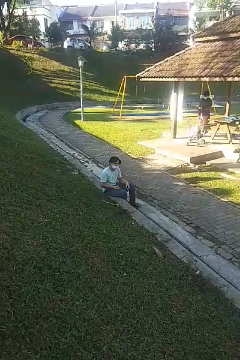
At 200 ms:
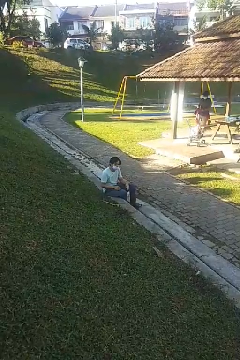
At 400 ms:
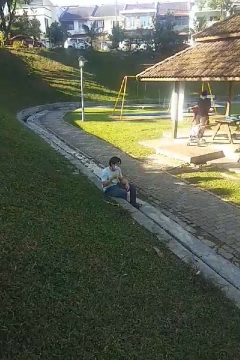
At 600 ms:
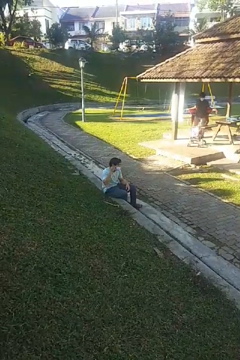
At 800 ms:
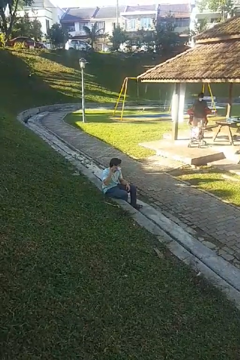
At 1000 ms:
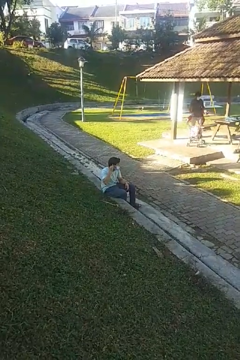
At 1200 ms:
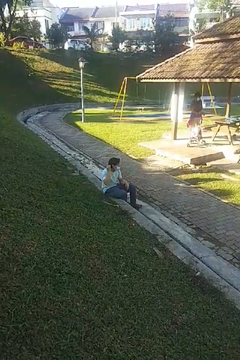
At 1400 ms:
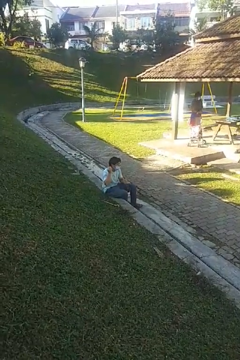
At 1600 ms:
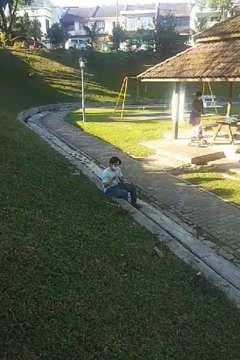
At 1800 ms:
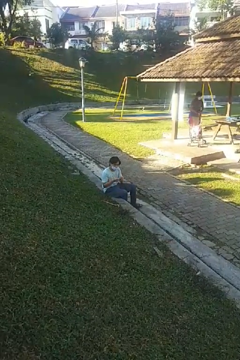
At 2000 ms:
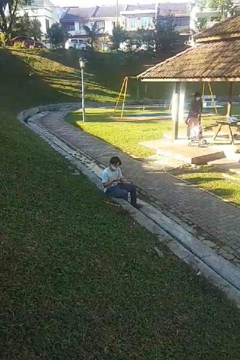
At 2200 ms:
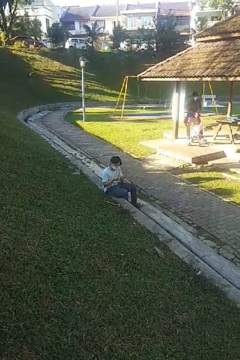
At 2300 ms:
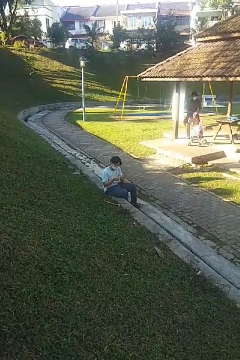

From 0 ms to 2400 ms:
person takes off earrings

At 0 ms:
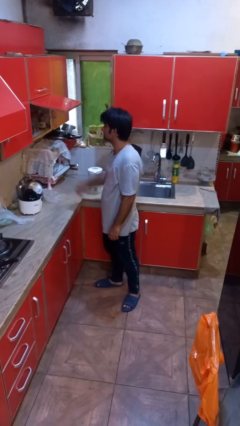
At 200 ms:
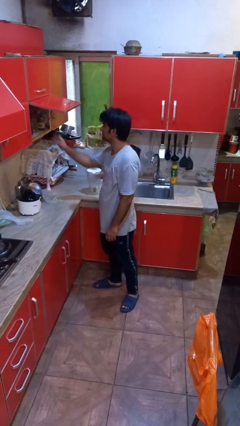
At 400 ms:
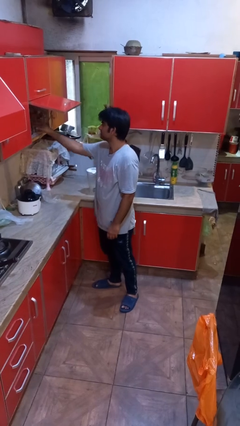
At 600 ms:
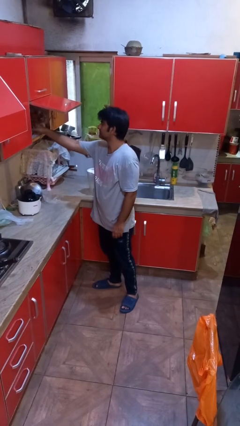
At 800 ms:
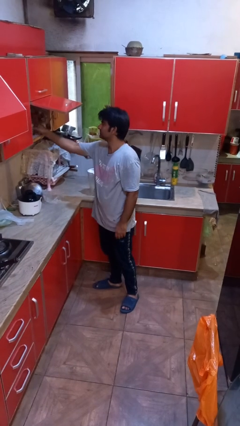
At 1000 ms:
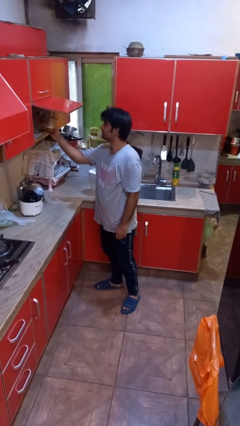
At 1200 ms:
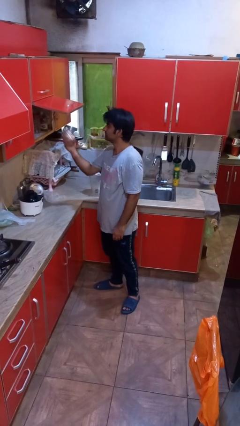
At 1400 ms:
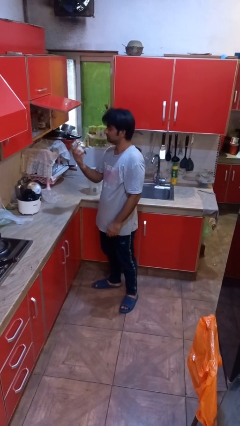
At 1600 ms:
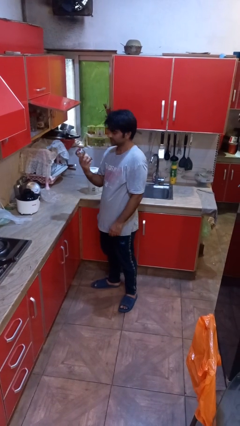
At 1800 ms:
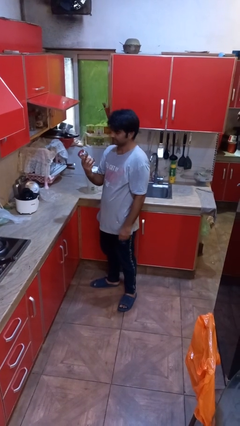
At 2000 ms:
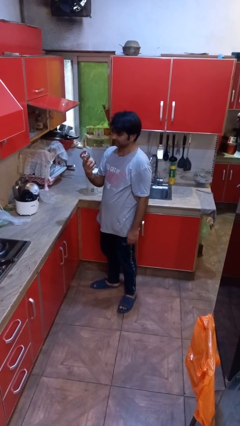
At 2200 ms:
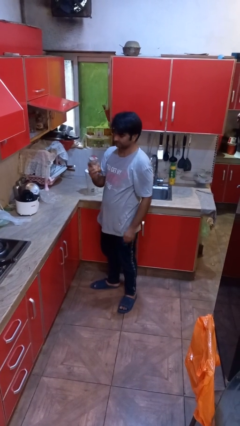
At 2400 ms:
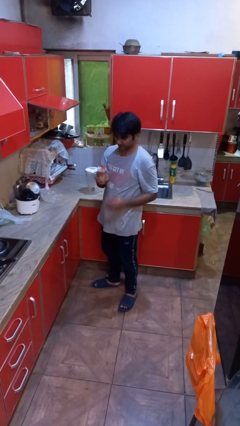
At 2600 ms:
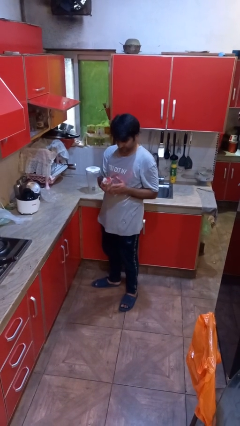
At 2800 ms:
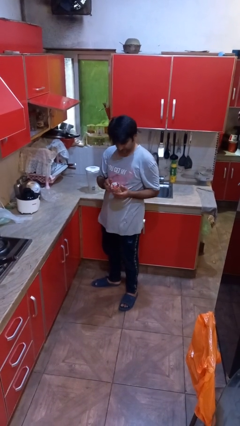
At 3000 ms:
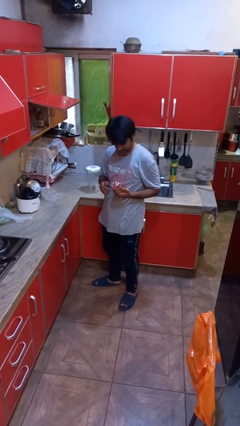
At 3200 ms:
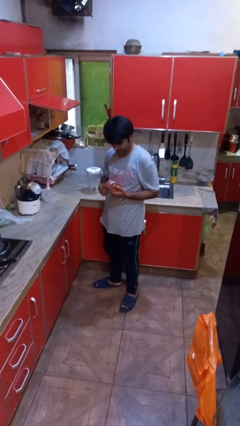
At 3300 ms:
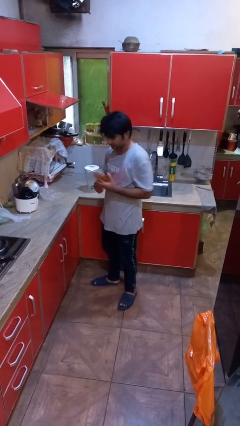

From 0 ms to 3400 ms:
person picks up object from cabinet

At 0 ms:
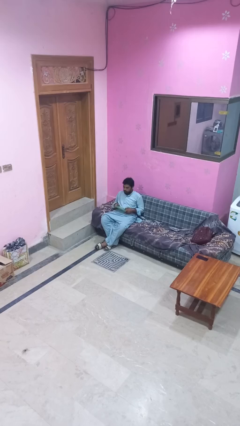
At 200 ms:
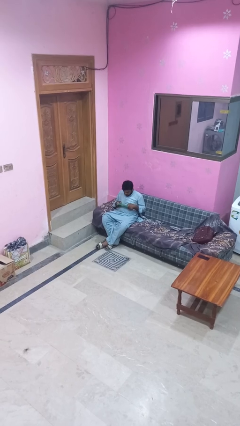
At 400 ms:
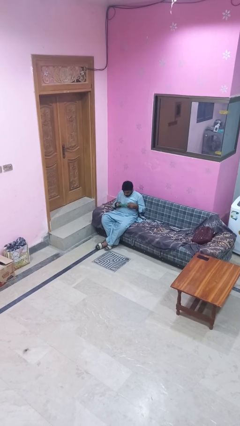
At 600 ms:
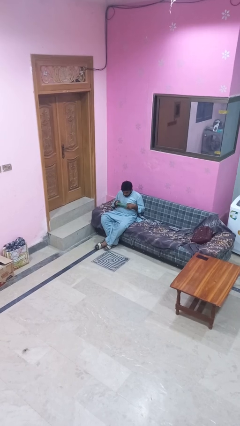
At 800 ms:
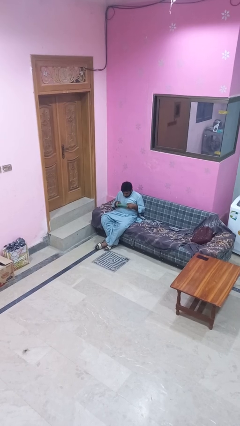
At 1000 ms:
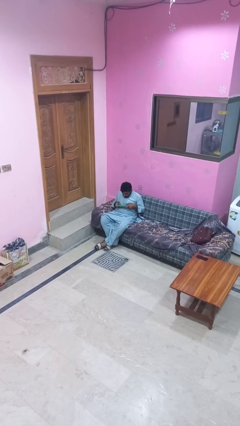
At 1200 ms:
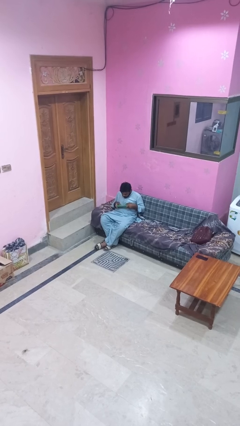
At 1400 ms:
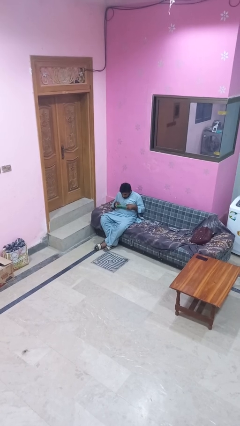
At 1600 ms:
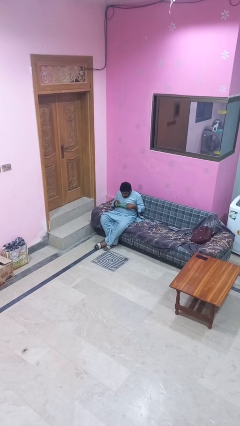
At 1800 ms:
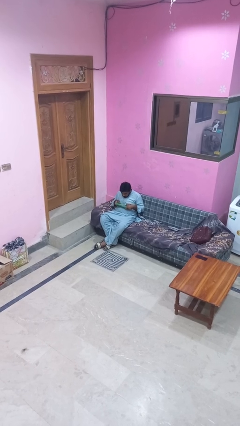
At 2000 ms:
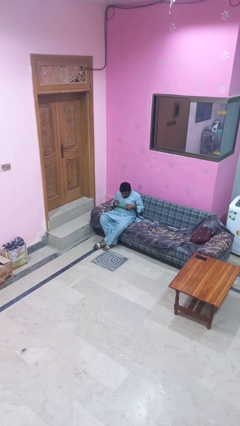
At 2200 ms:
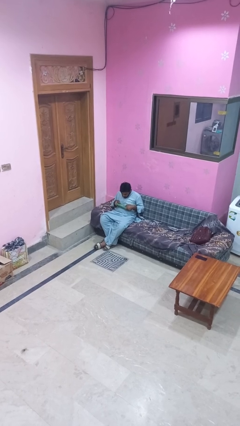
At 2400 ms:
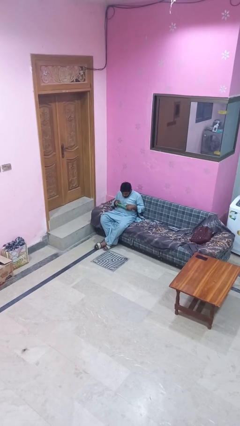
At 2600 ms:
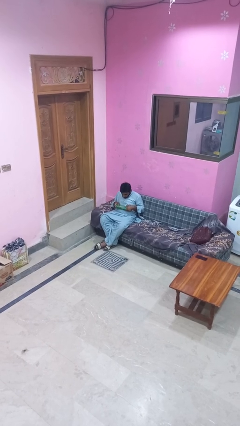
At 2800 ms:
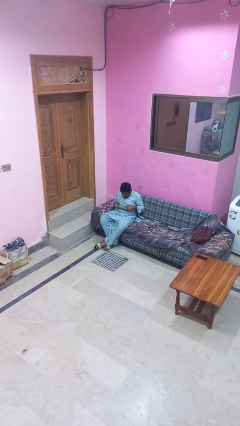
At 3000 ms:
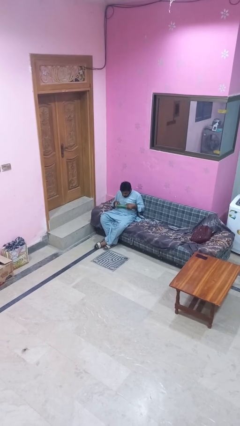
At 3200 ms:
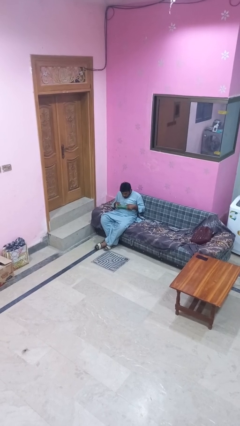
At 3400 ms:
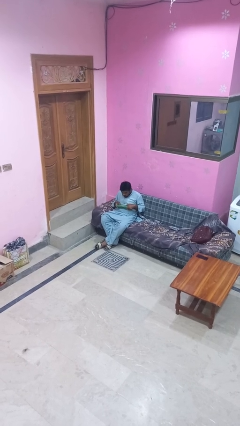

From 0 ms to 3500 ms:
person interacts with handheld game

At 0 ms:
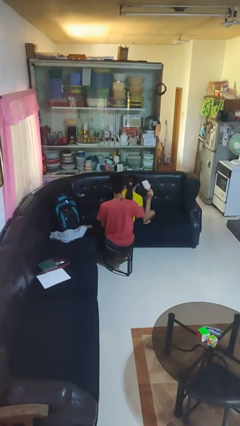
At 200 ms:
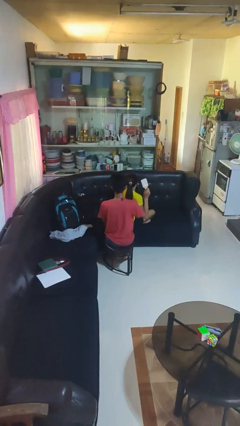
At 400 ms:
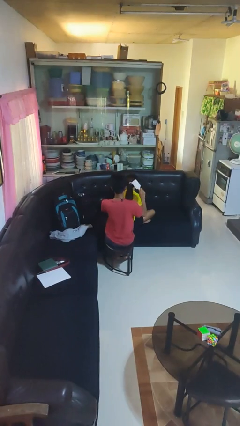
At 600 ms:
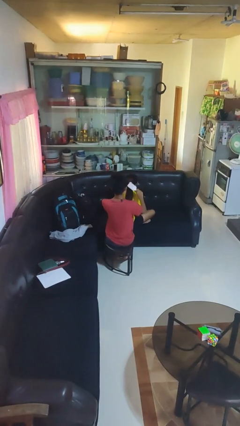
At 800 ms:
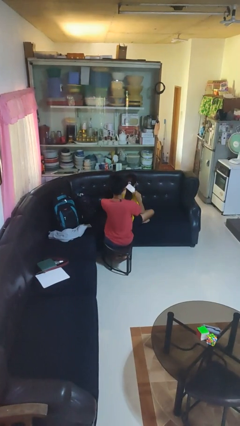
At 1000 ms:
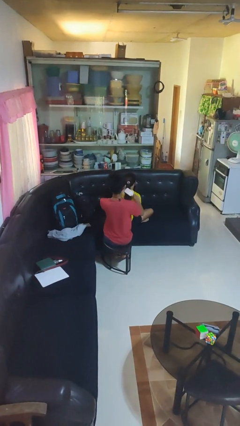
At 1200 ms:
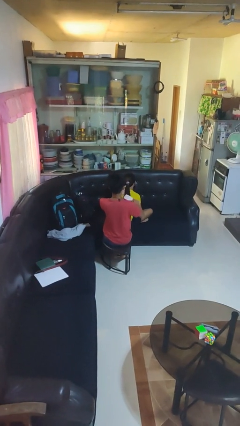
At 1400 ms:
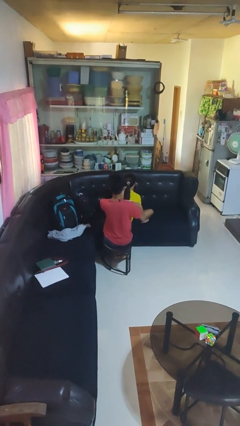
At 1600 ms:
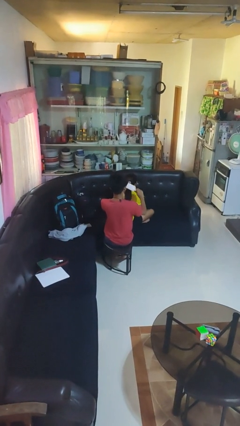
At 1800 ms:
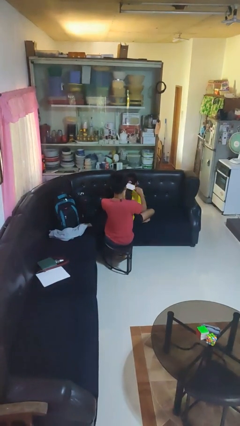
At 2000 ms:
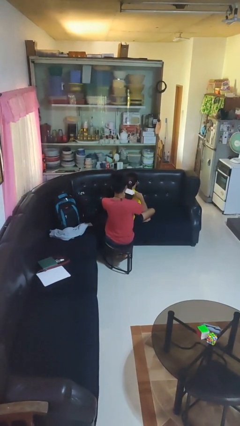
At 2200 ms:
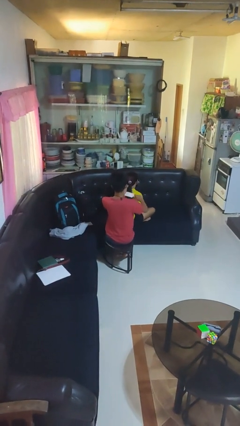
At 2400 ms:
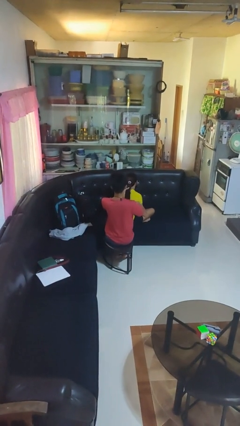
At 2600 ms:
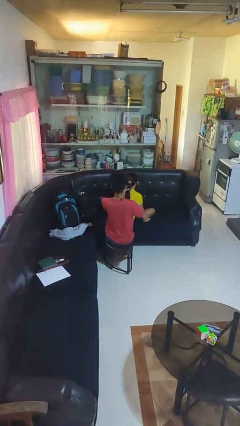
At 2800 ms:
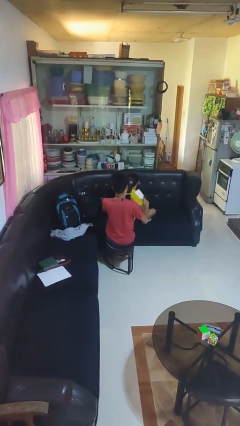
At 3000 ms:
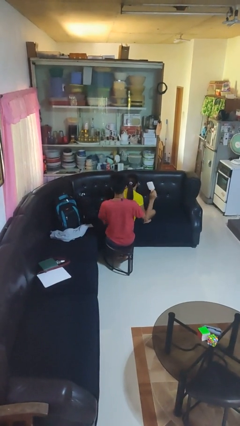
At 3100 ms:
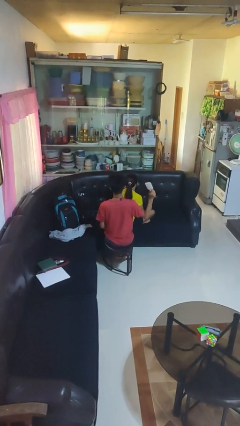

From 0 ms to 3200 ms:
person brushes hair of person

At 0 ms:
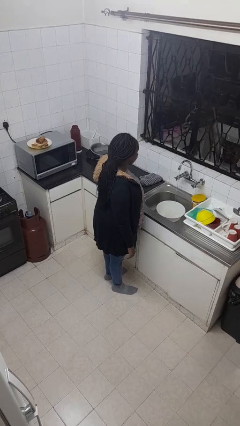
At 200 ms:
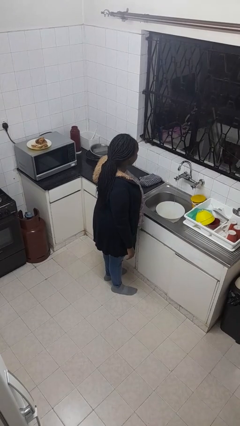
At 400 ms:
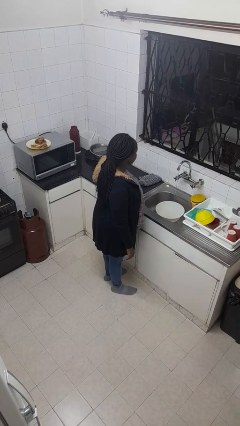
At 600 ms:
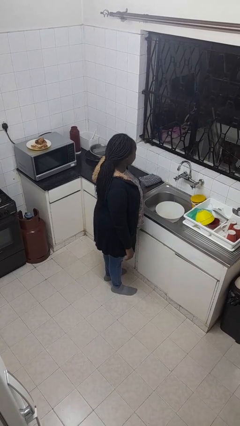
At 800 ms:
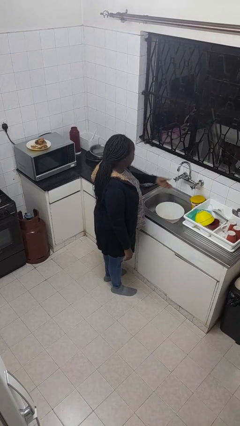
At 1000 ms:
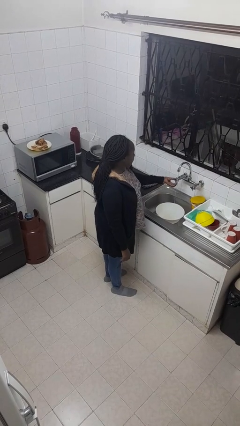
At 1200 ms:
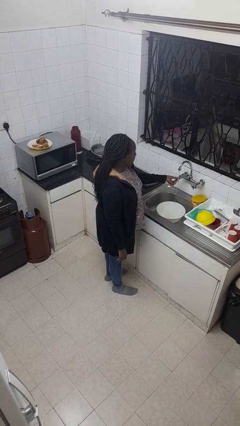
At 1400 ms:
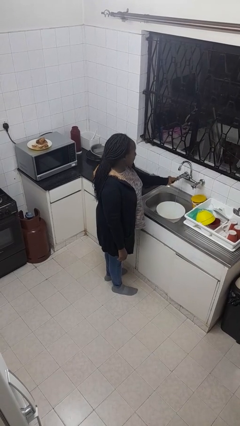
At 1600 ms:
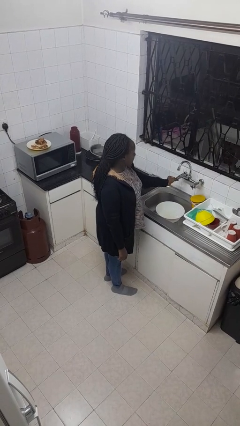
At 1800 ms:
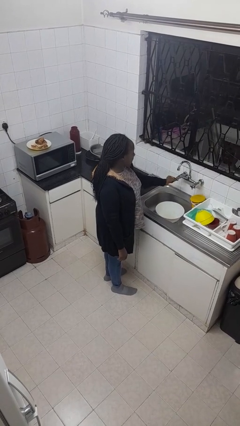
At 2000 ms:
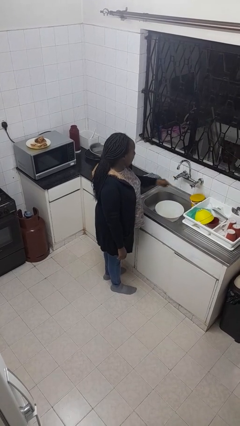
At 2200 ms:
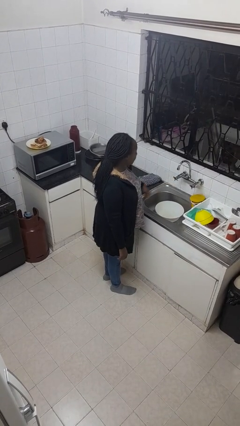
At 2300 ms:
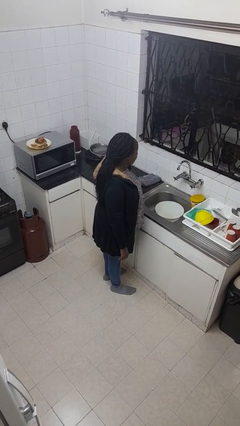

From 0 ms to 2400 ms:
person turns off faucet

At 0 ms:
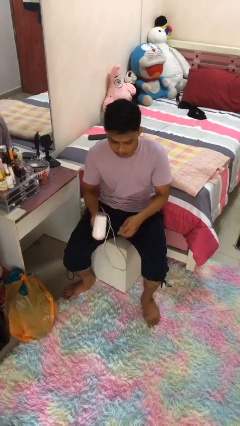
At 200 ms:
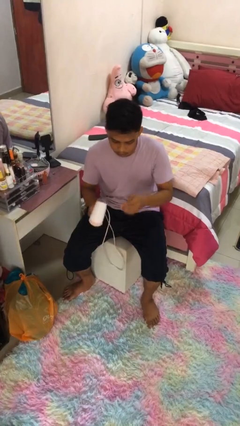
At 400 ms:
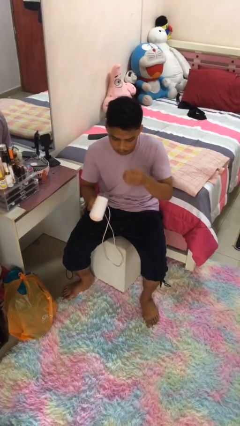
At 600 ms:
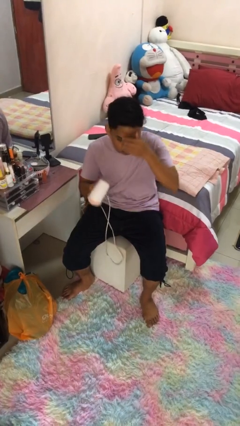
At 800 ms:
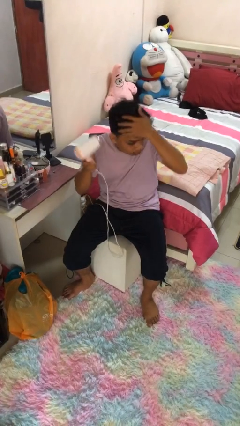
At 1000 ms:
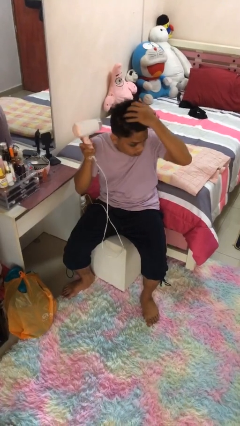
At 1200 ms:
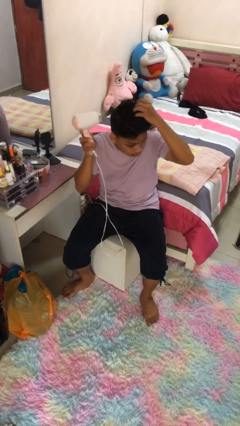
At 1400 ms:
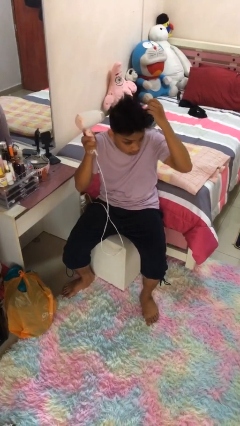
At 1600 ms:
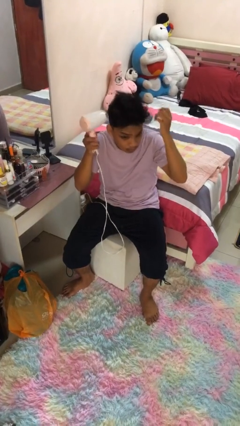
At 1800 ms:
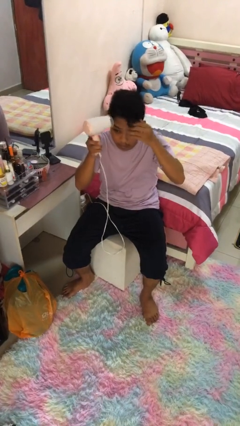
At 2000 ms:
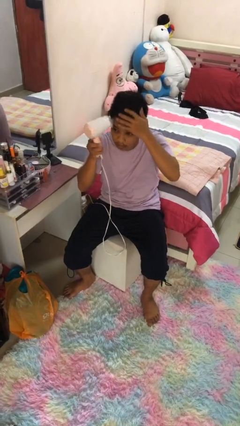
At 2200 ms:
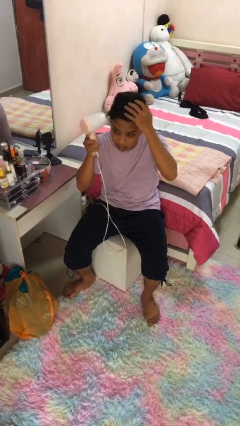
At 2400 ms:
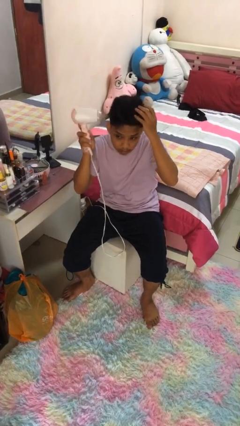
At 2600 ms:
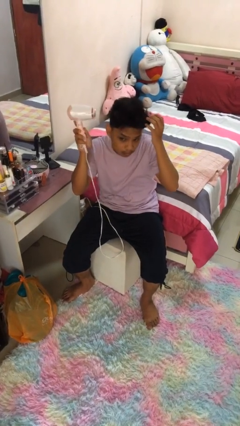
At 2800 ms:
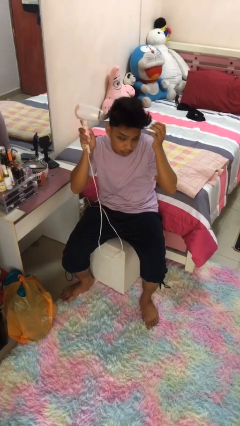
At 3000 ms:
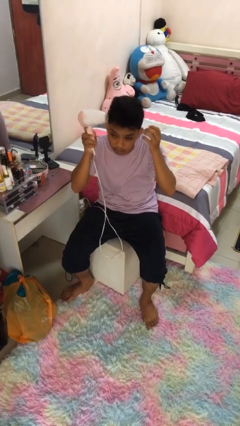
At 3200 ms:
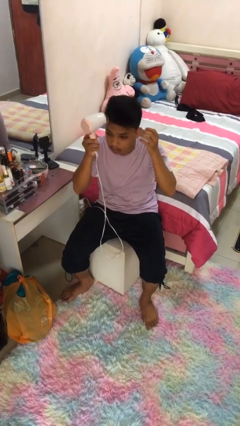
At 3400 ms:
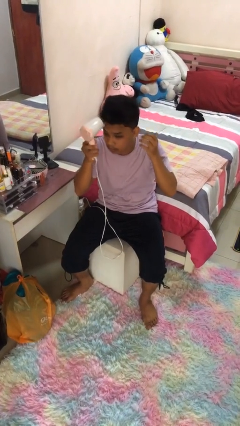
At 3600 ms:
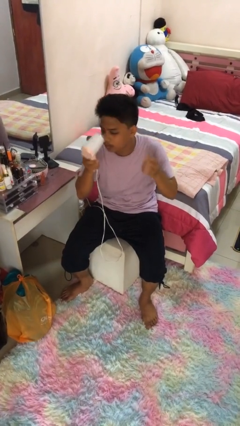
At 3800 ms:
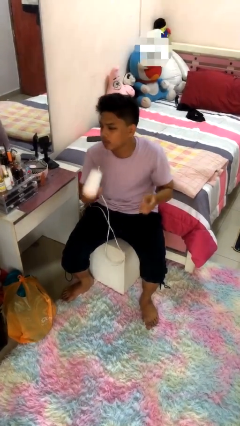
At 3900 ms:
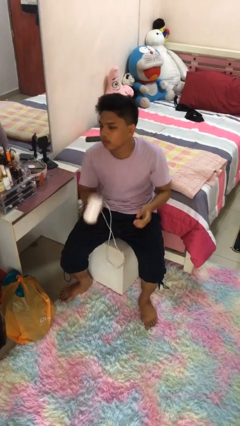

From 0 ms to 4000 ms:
person dries hair with hairdryer